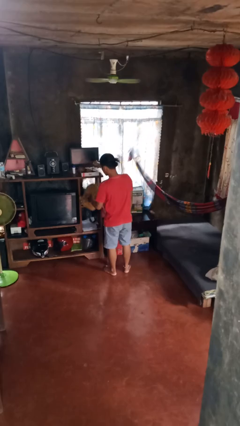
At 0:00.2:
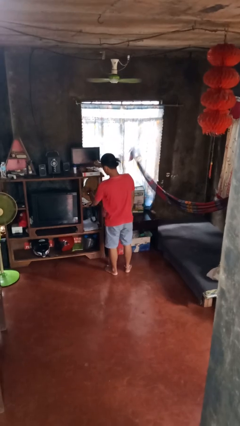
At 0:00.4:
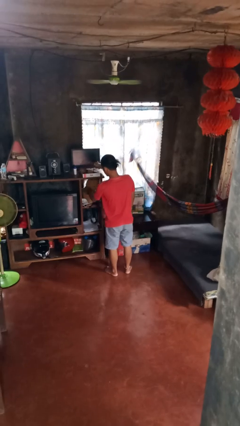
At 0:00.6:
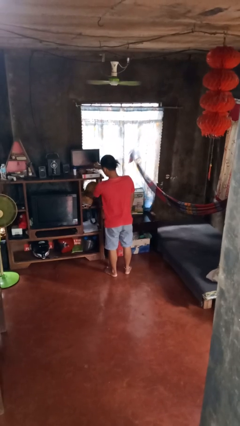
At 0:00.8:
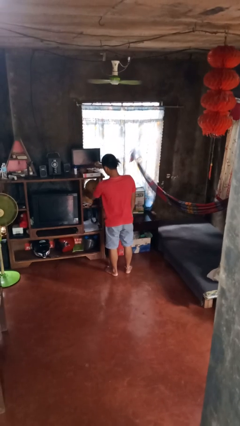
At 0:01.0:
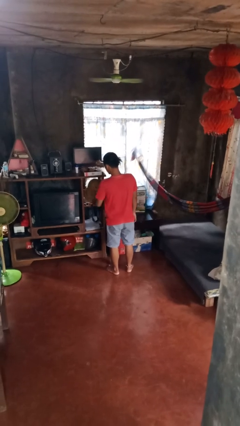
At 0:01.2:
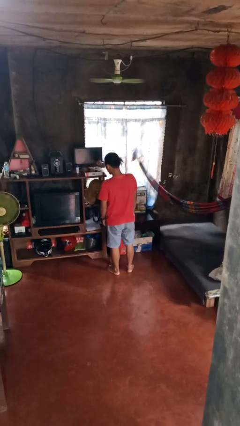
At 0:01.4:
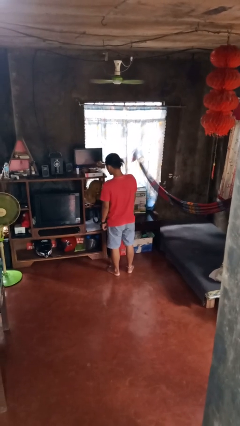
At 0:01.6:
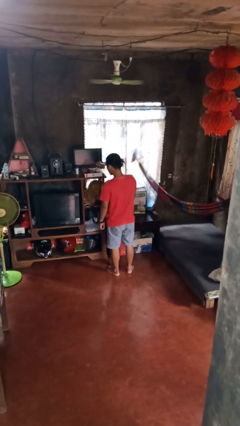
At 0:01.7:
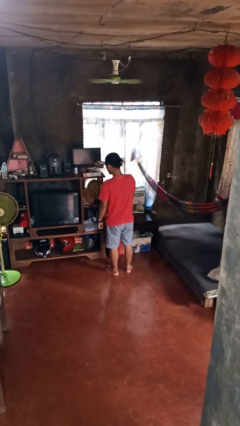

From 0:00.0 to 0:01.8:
person puts down object into cabinet

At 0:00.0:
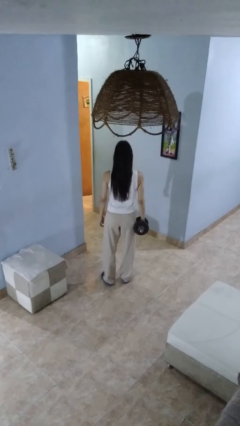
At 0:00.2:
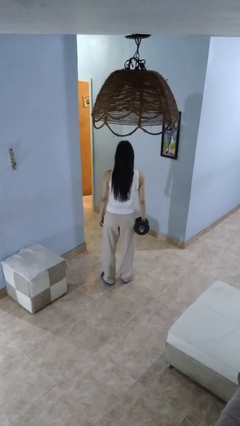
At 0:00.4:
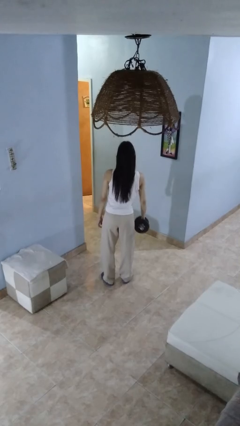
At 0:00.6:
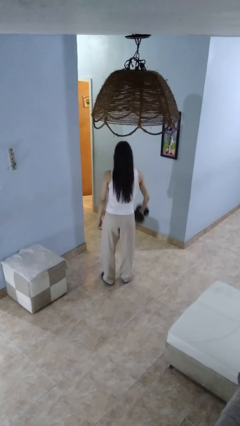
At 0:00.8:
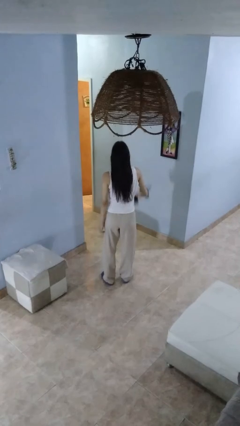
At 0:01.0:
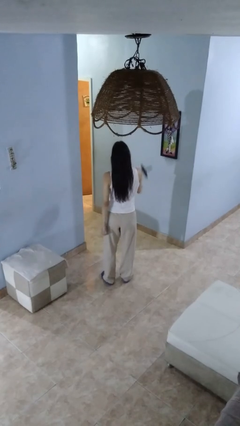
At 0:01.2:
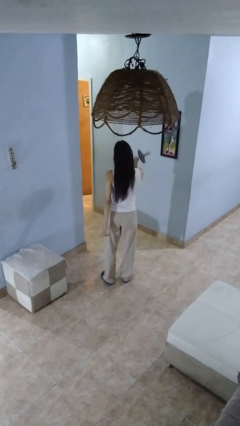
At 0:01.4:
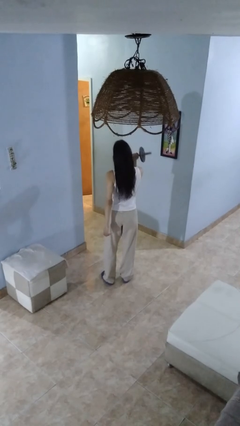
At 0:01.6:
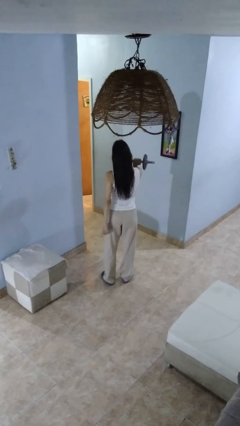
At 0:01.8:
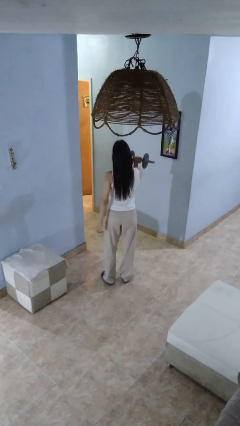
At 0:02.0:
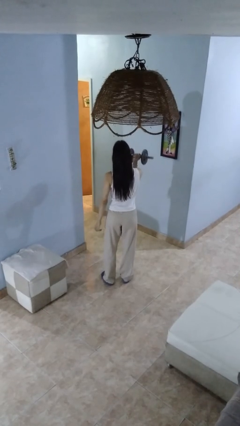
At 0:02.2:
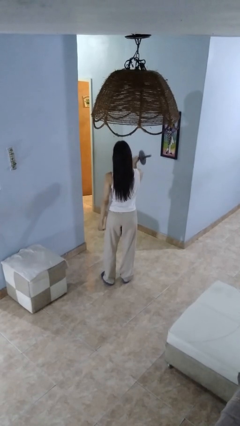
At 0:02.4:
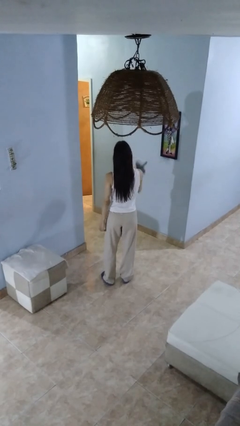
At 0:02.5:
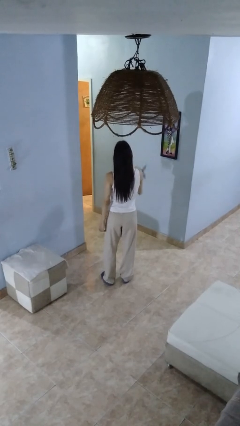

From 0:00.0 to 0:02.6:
person lifts dumbbells

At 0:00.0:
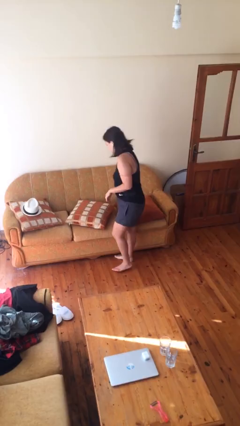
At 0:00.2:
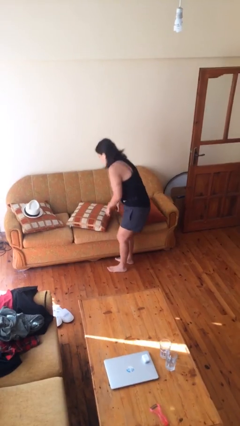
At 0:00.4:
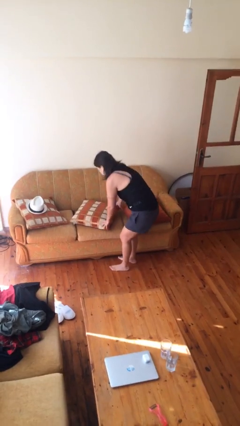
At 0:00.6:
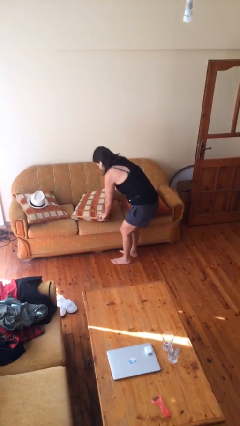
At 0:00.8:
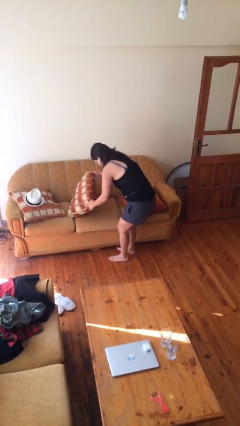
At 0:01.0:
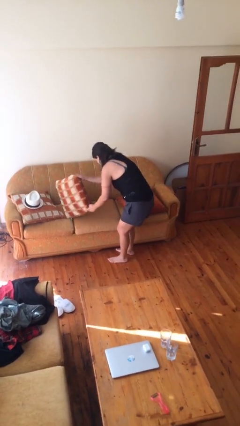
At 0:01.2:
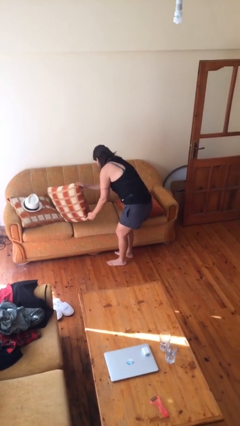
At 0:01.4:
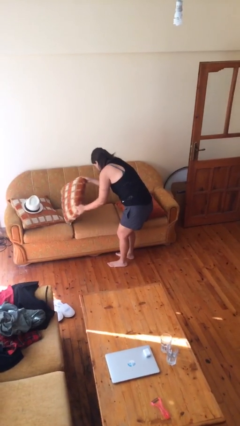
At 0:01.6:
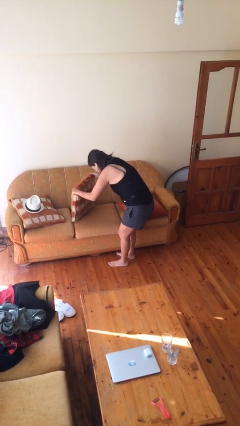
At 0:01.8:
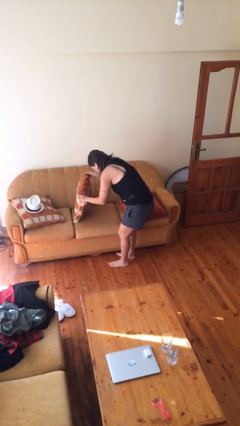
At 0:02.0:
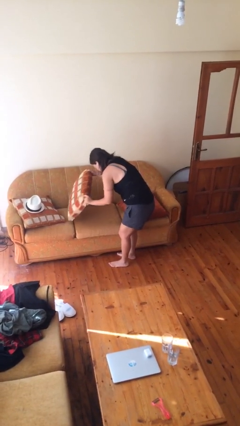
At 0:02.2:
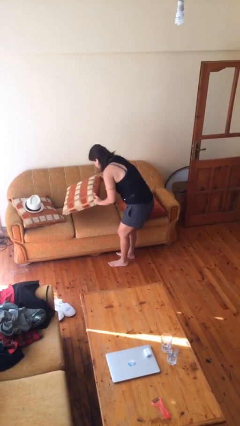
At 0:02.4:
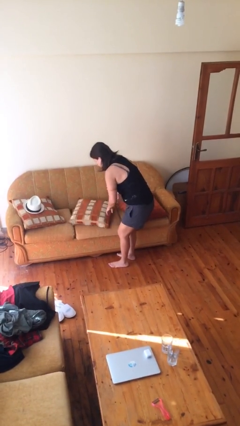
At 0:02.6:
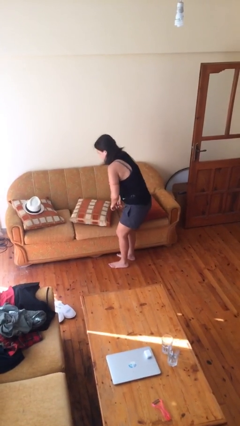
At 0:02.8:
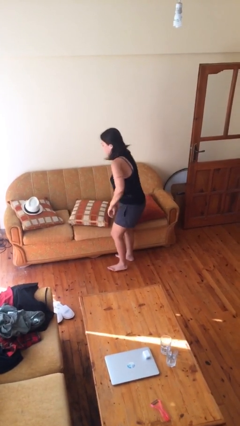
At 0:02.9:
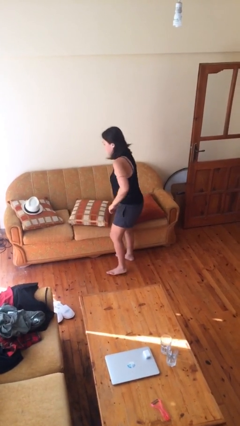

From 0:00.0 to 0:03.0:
person searches in couch

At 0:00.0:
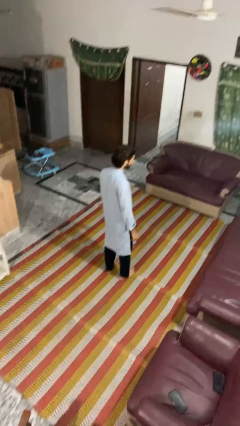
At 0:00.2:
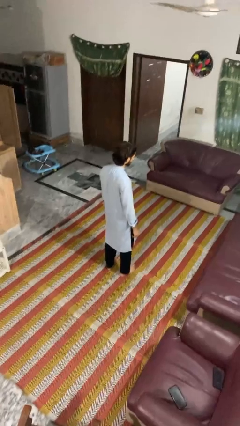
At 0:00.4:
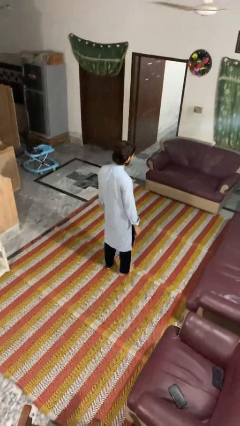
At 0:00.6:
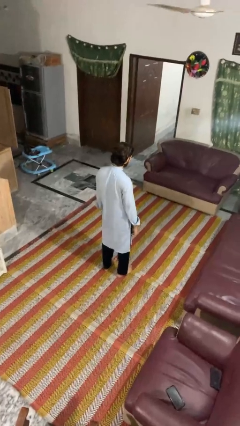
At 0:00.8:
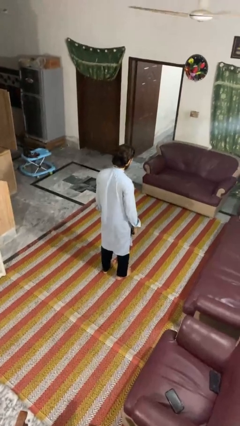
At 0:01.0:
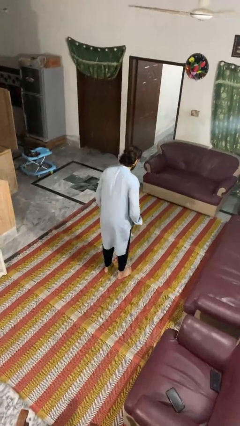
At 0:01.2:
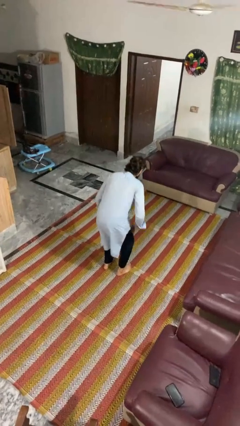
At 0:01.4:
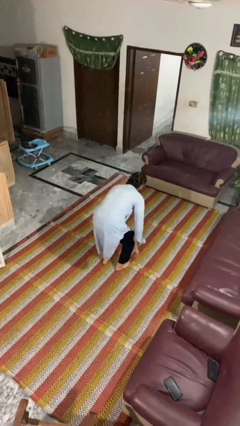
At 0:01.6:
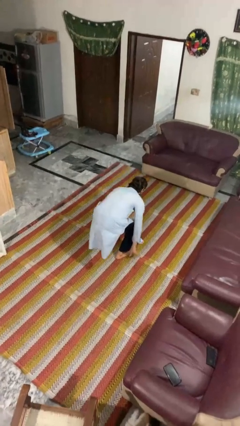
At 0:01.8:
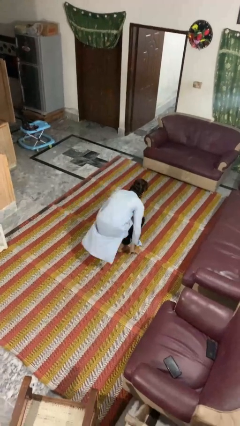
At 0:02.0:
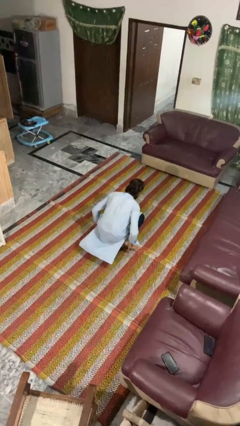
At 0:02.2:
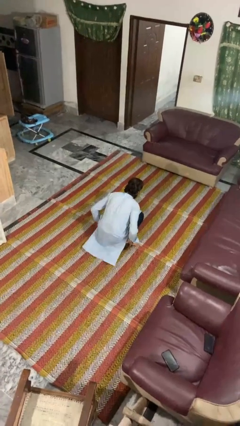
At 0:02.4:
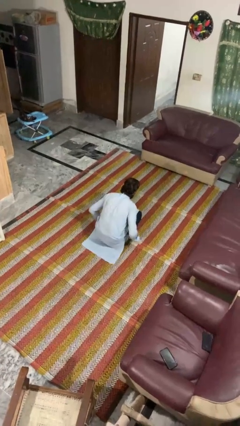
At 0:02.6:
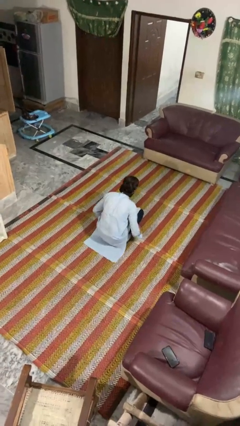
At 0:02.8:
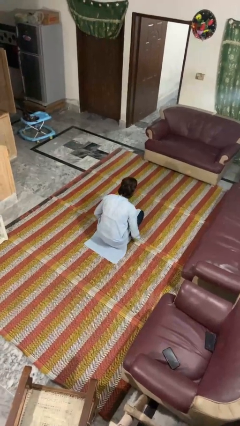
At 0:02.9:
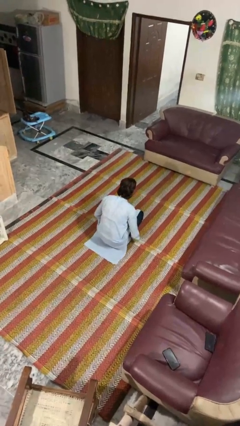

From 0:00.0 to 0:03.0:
person squats

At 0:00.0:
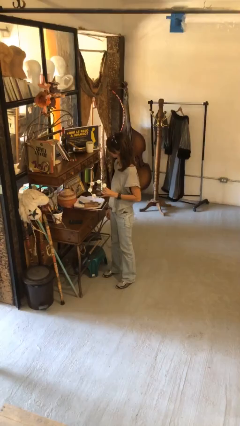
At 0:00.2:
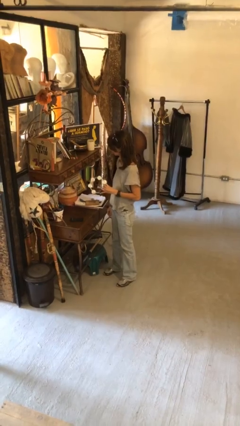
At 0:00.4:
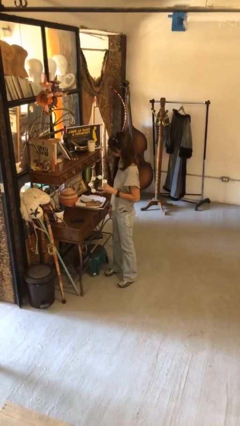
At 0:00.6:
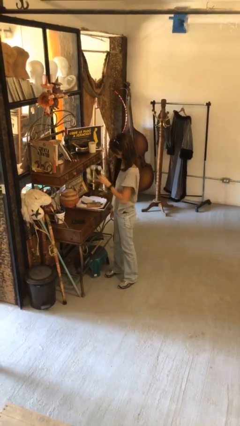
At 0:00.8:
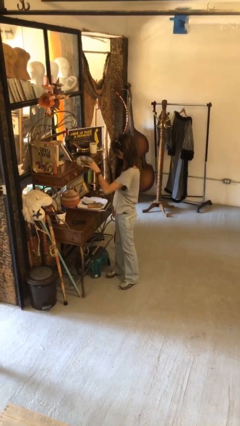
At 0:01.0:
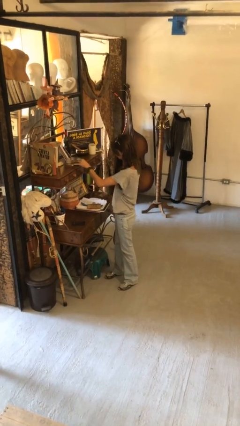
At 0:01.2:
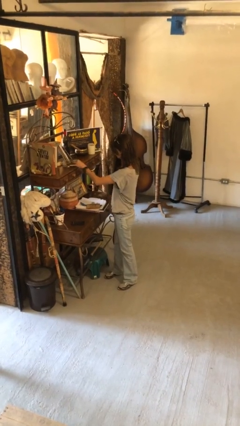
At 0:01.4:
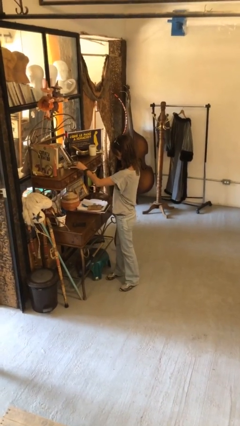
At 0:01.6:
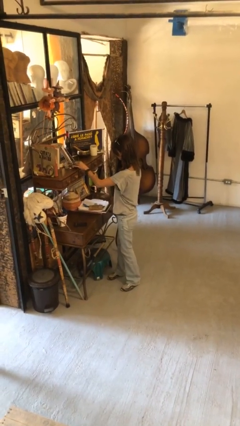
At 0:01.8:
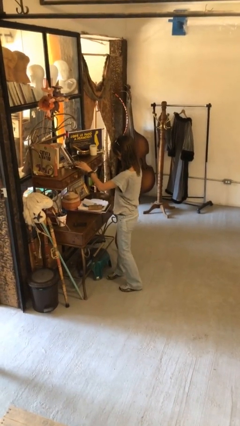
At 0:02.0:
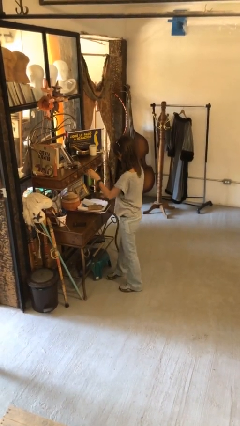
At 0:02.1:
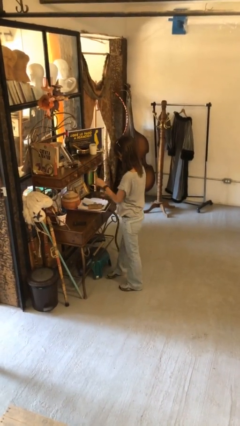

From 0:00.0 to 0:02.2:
person puts down object on countertop

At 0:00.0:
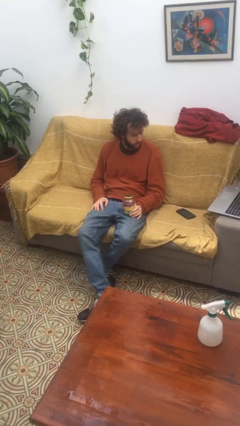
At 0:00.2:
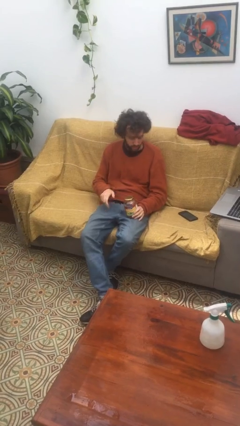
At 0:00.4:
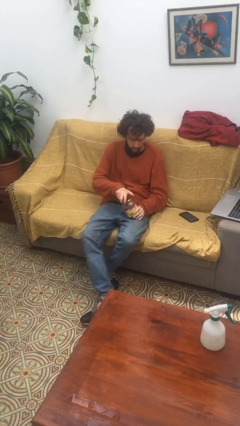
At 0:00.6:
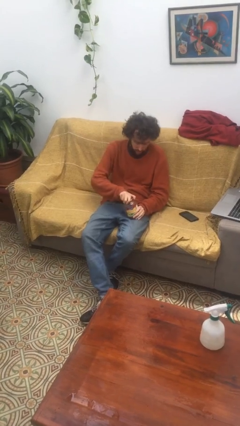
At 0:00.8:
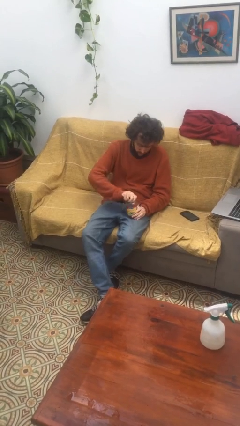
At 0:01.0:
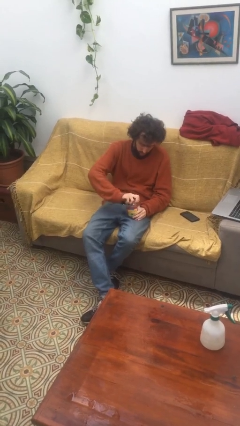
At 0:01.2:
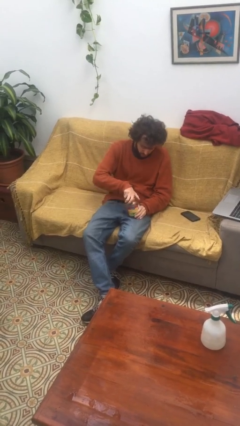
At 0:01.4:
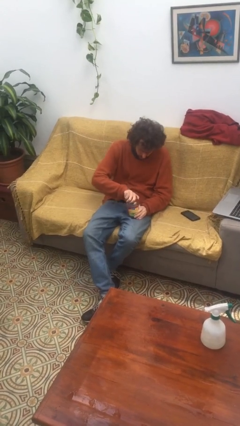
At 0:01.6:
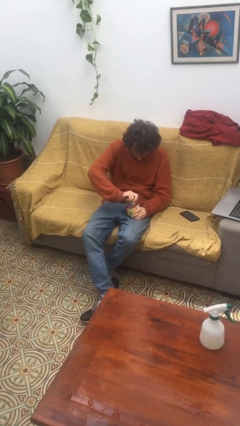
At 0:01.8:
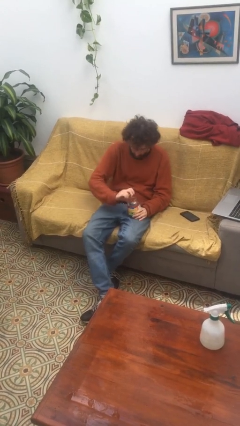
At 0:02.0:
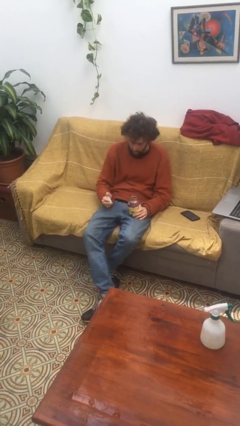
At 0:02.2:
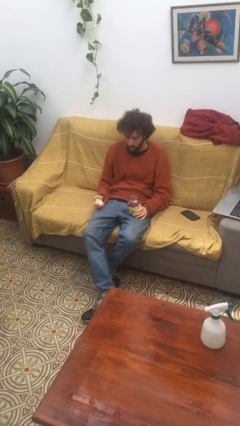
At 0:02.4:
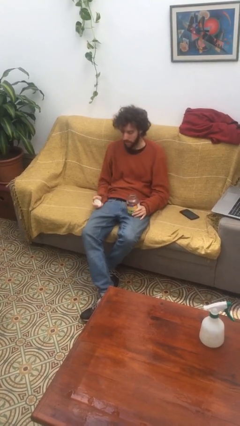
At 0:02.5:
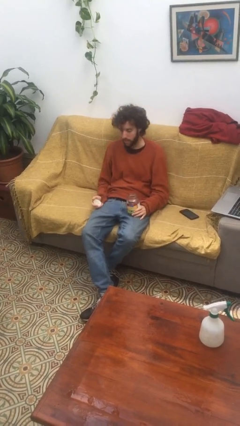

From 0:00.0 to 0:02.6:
person opens jar

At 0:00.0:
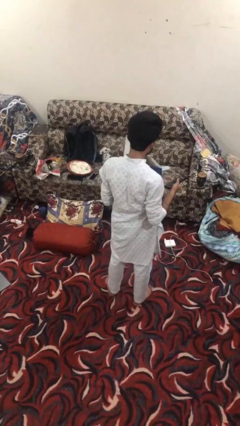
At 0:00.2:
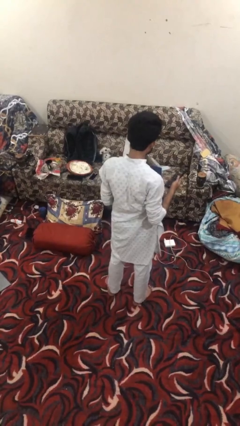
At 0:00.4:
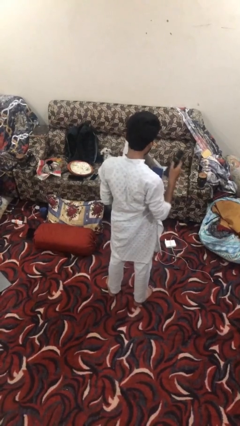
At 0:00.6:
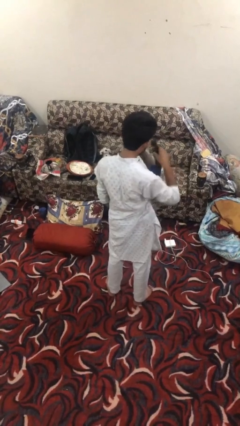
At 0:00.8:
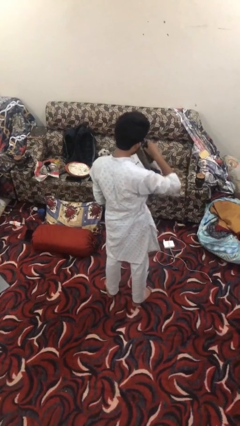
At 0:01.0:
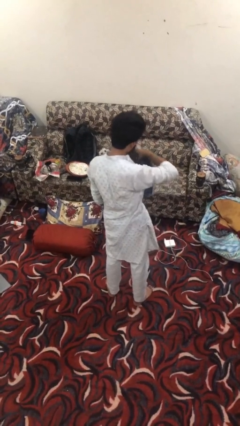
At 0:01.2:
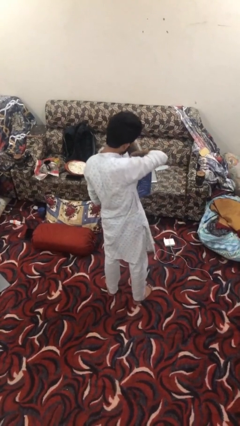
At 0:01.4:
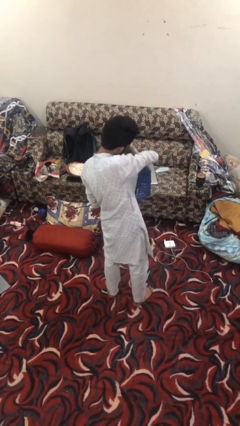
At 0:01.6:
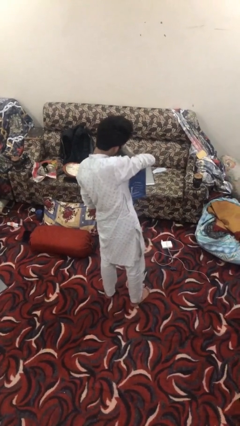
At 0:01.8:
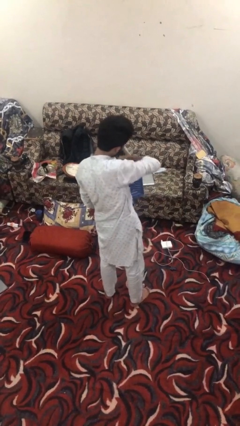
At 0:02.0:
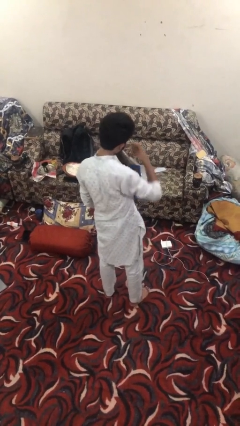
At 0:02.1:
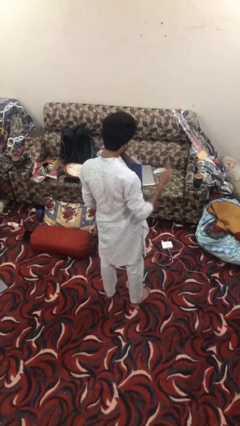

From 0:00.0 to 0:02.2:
person puts object into bag
